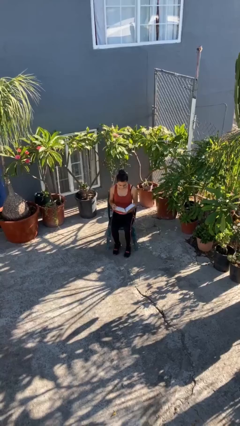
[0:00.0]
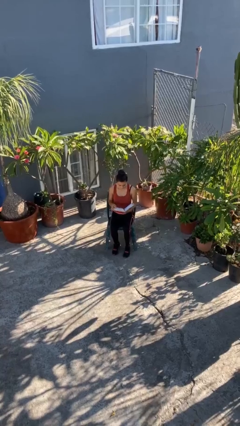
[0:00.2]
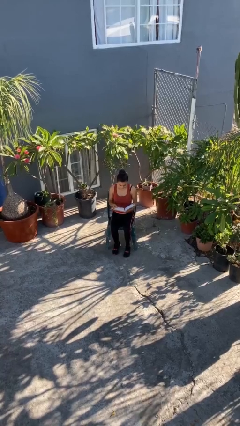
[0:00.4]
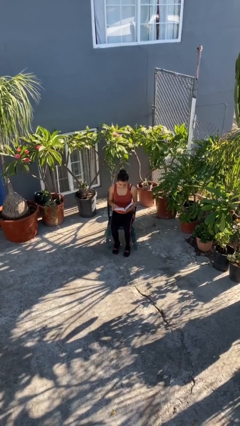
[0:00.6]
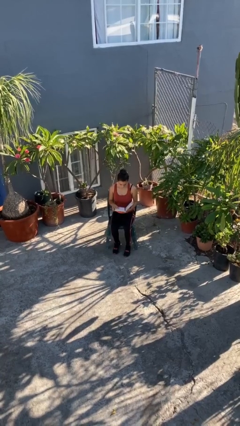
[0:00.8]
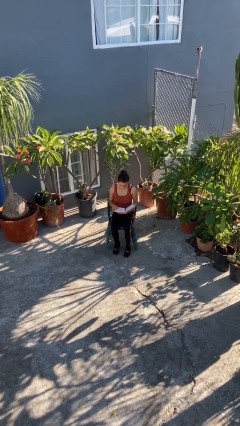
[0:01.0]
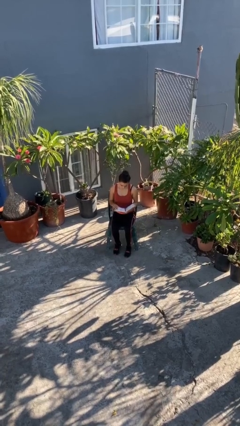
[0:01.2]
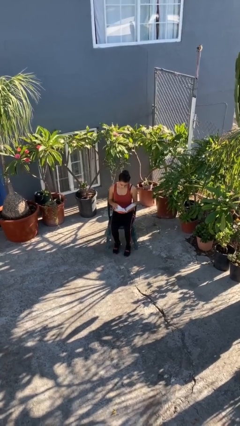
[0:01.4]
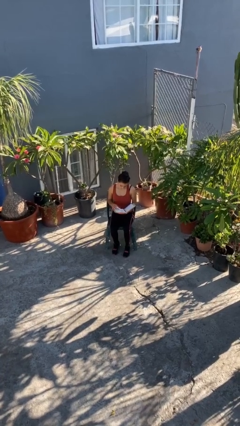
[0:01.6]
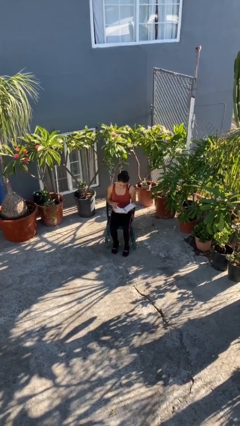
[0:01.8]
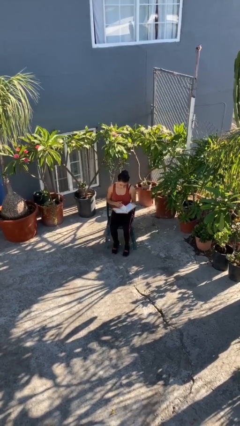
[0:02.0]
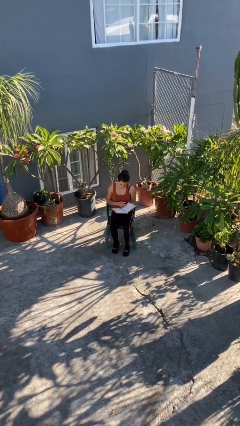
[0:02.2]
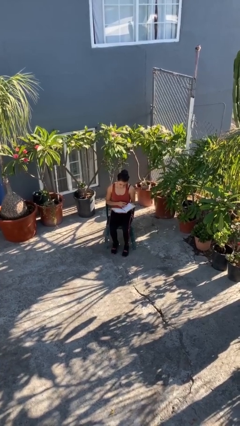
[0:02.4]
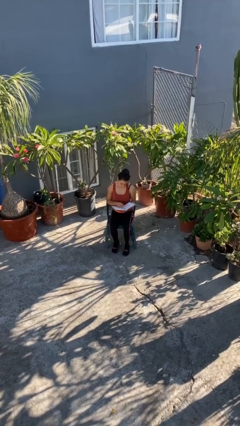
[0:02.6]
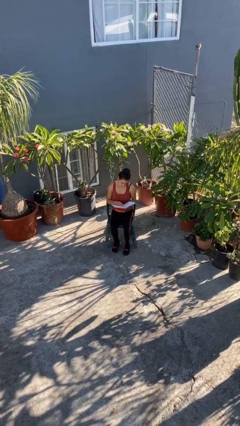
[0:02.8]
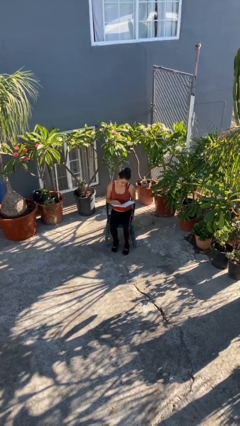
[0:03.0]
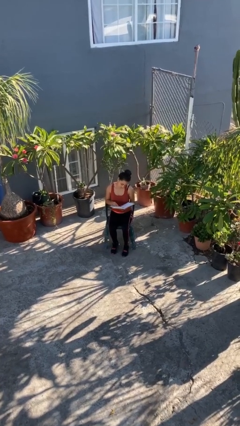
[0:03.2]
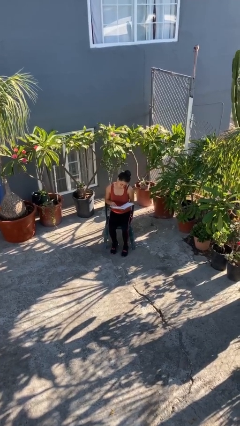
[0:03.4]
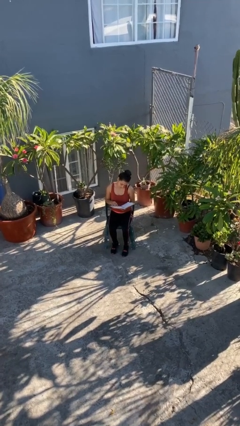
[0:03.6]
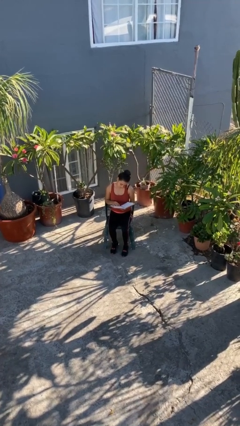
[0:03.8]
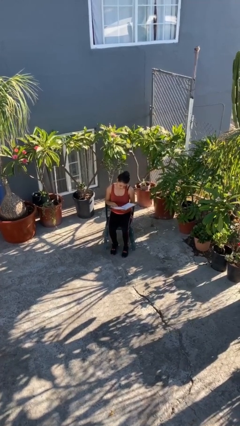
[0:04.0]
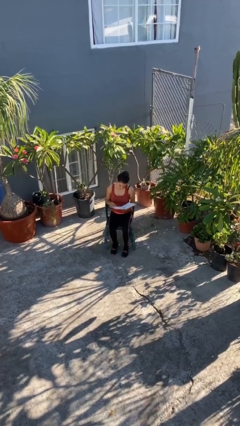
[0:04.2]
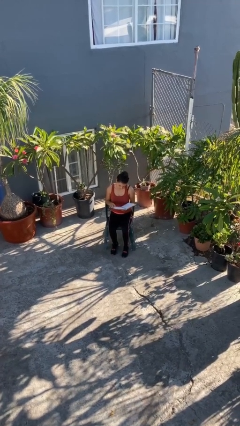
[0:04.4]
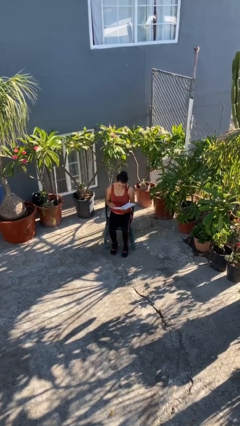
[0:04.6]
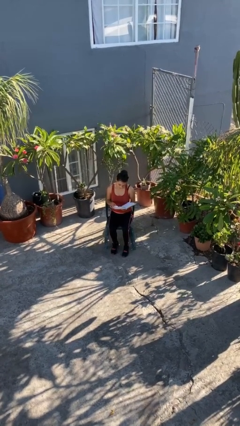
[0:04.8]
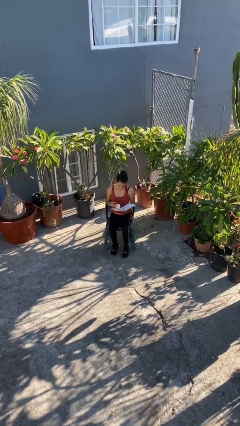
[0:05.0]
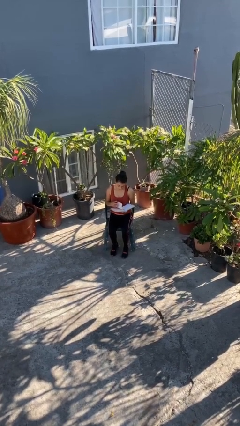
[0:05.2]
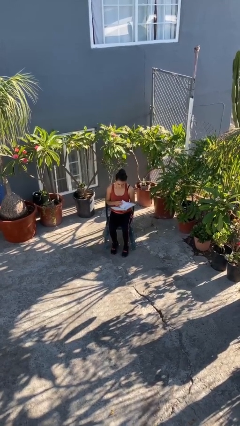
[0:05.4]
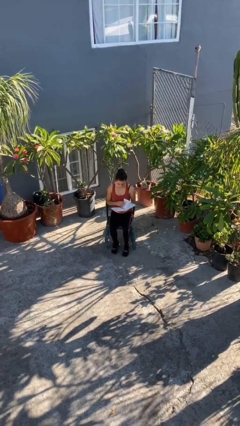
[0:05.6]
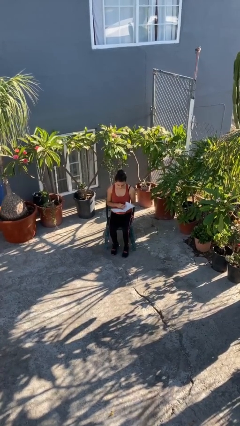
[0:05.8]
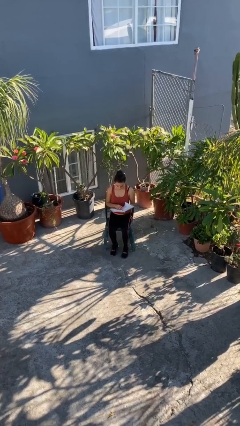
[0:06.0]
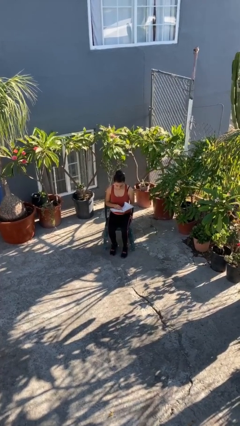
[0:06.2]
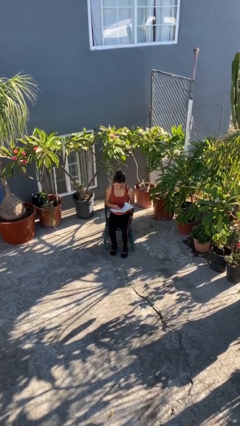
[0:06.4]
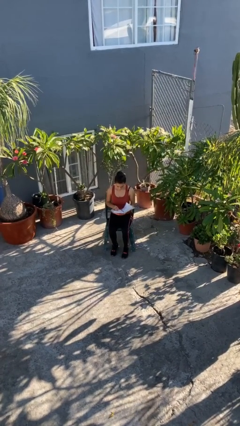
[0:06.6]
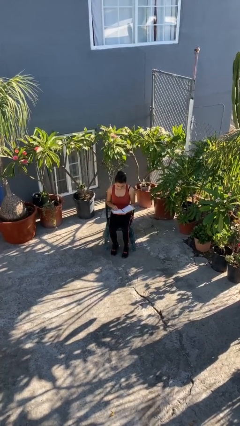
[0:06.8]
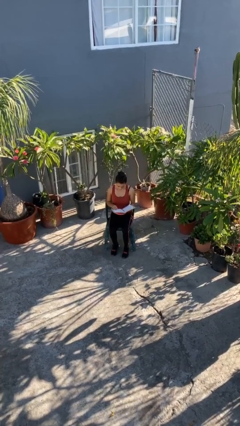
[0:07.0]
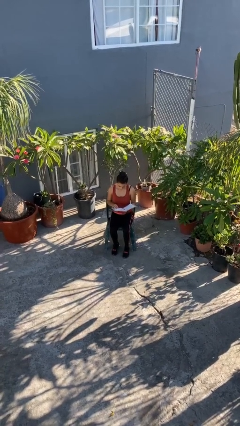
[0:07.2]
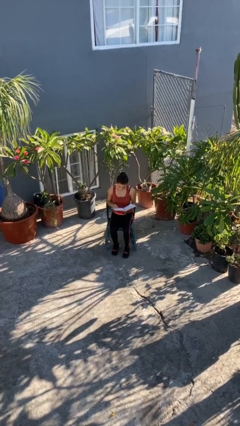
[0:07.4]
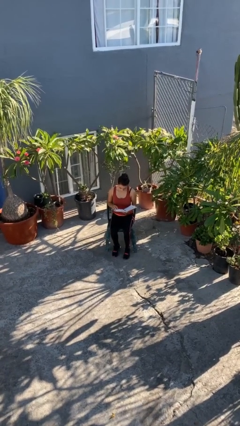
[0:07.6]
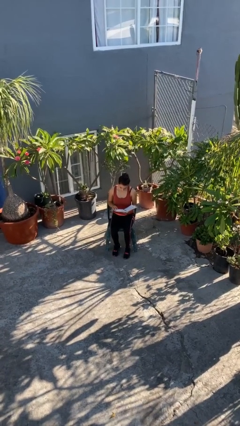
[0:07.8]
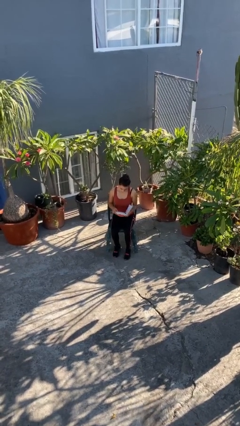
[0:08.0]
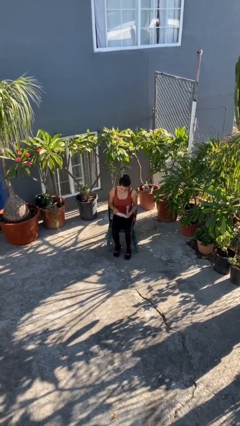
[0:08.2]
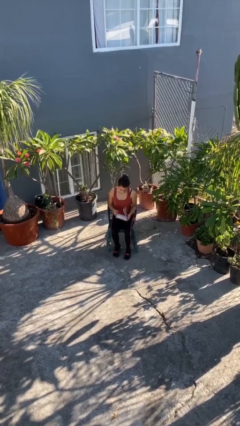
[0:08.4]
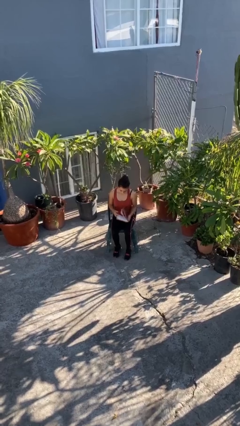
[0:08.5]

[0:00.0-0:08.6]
person reads document

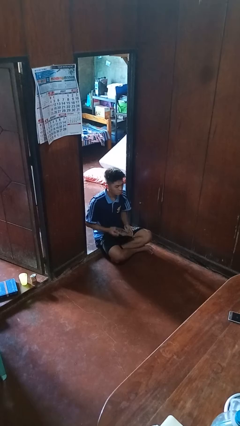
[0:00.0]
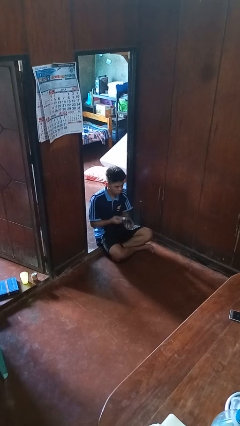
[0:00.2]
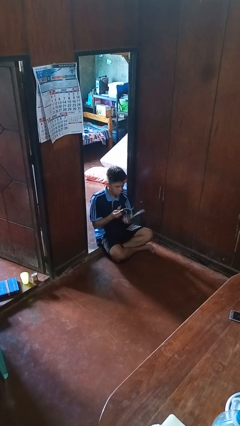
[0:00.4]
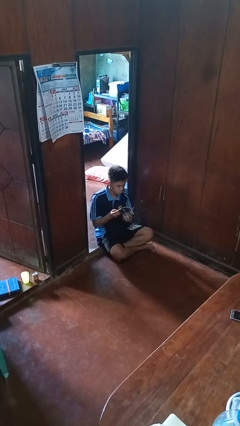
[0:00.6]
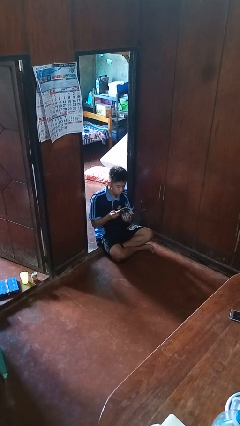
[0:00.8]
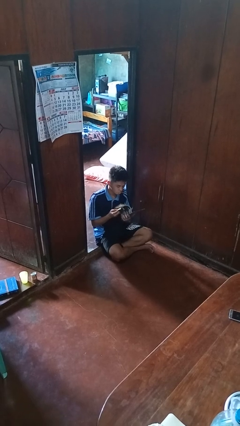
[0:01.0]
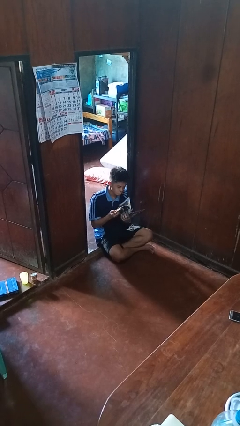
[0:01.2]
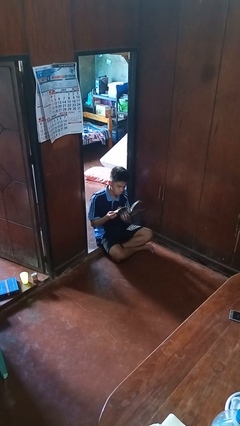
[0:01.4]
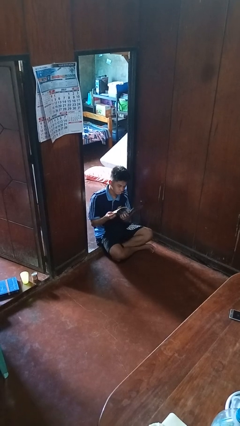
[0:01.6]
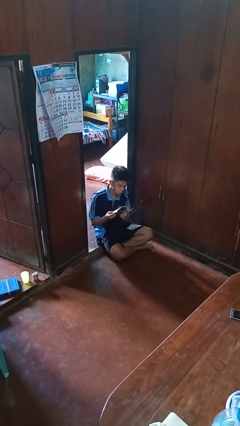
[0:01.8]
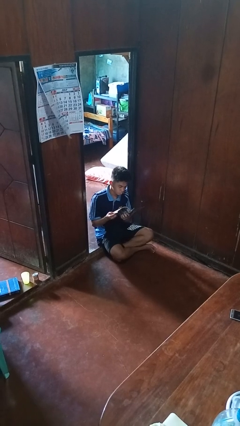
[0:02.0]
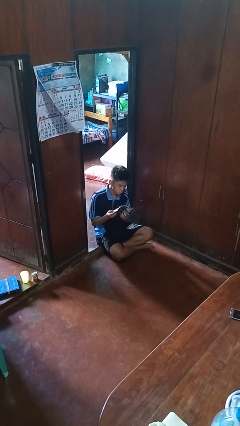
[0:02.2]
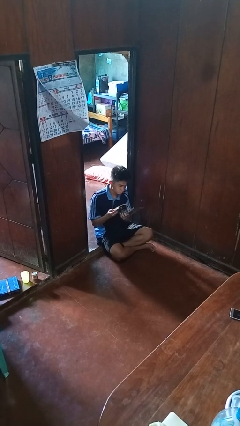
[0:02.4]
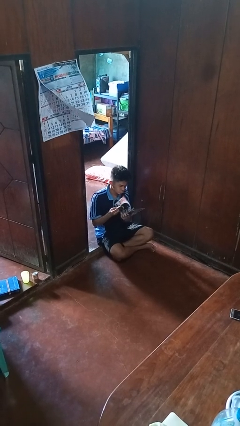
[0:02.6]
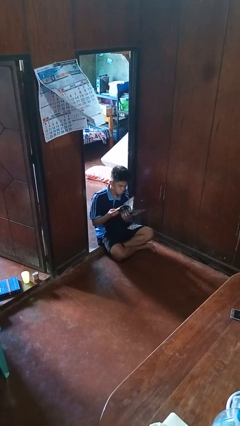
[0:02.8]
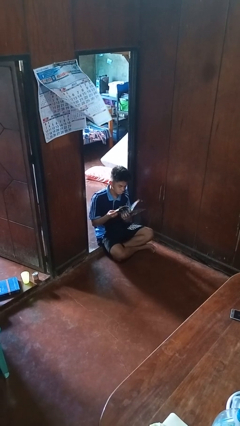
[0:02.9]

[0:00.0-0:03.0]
person reads magazine

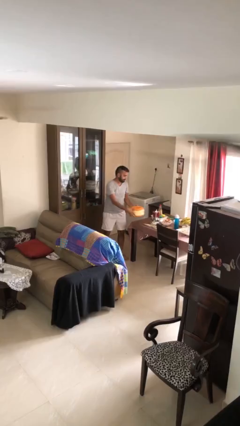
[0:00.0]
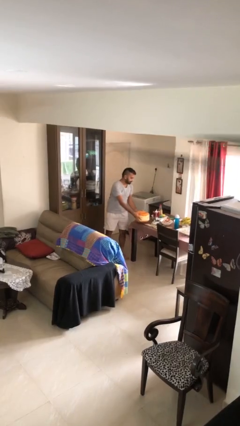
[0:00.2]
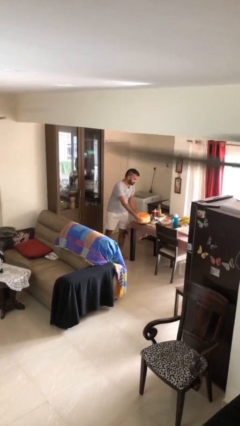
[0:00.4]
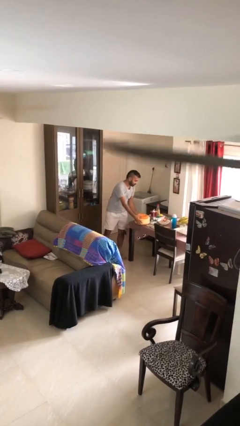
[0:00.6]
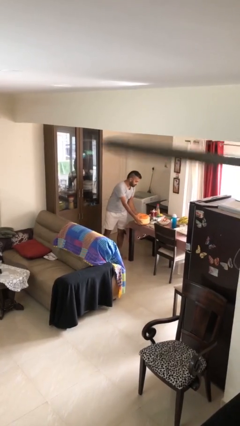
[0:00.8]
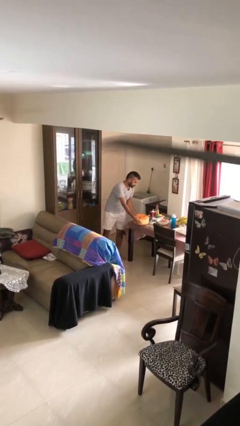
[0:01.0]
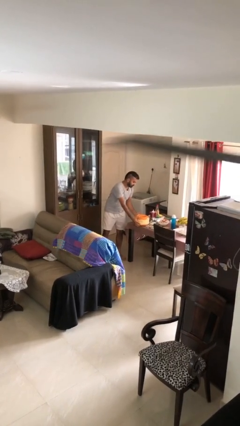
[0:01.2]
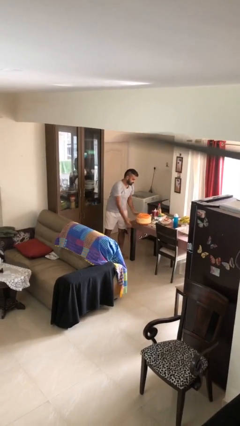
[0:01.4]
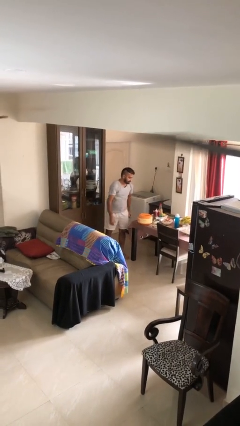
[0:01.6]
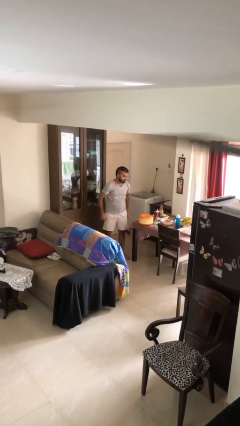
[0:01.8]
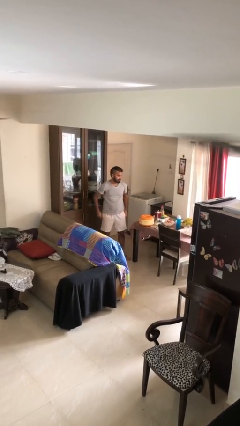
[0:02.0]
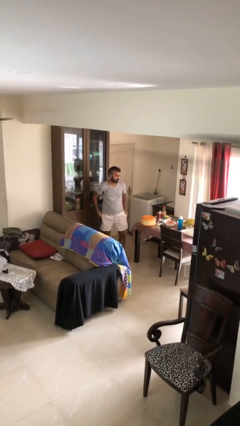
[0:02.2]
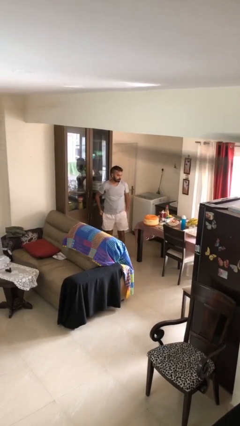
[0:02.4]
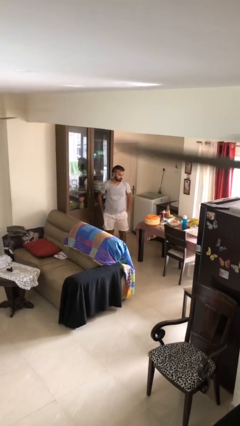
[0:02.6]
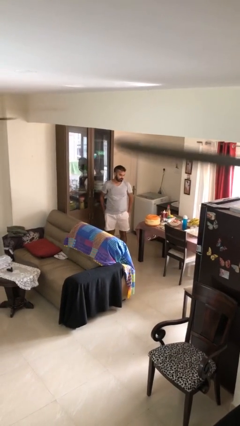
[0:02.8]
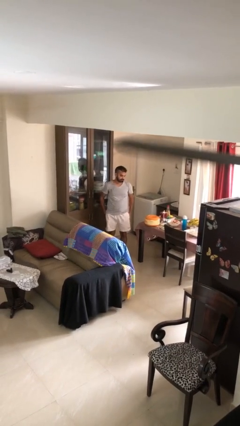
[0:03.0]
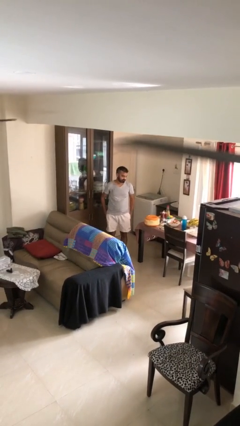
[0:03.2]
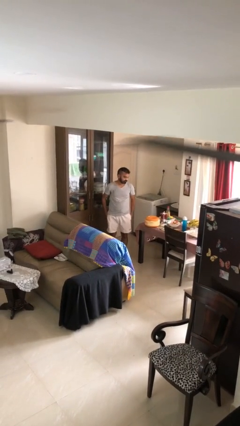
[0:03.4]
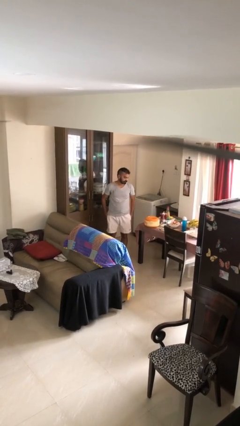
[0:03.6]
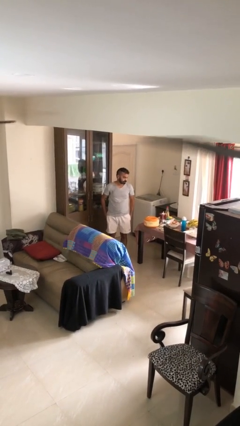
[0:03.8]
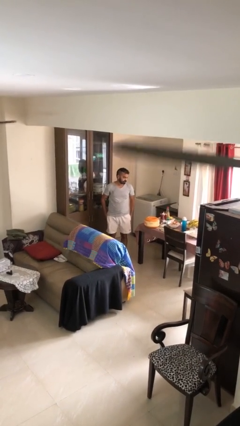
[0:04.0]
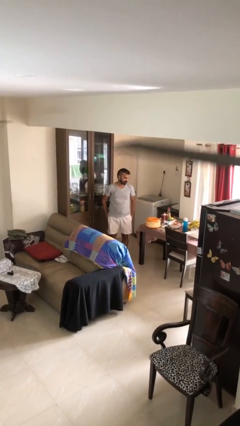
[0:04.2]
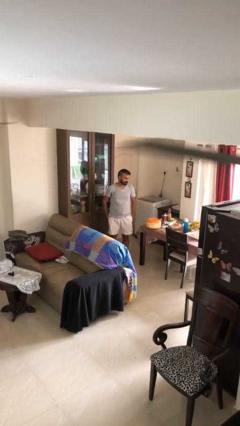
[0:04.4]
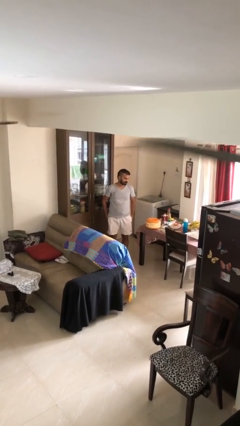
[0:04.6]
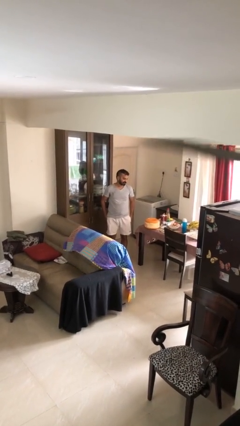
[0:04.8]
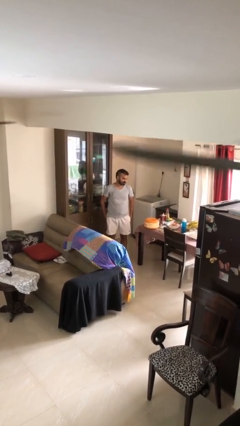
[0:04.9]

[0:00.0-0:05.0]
person puts down object on table

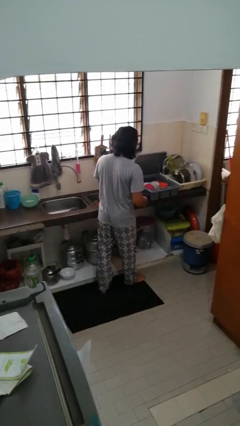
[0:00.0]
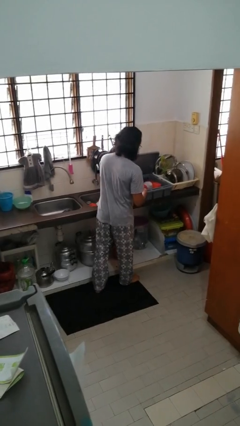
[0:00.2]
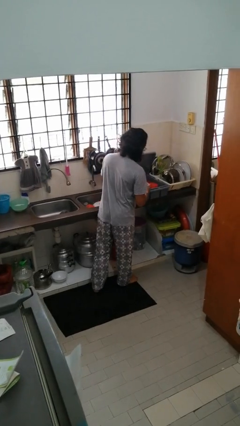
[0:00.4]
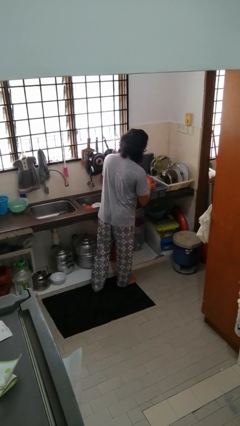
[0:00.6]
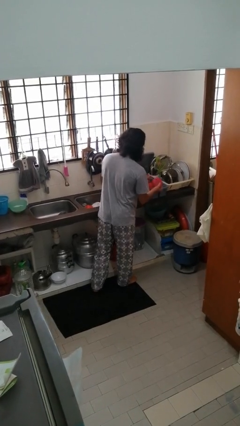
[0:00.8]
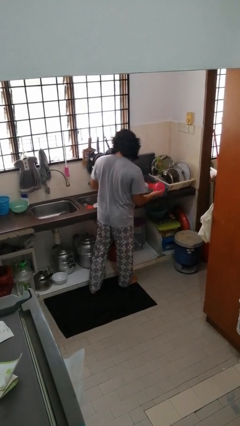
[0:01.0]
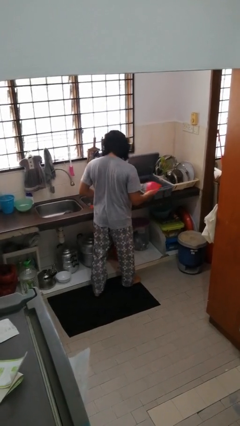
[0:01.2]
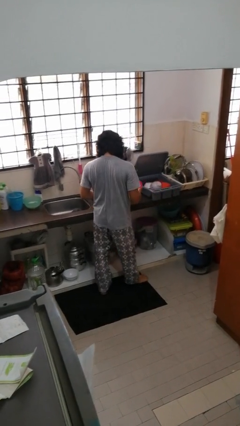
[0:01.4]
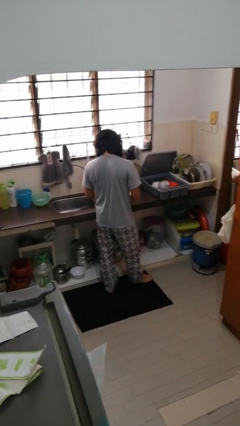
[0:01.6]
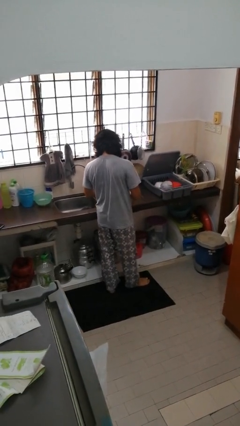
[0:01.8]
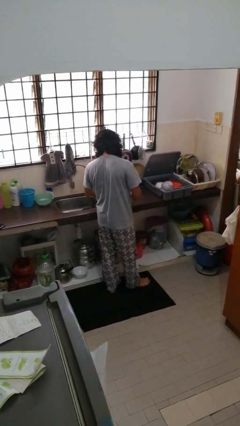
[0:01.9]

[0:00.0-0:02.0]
person unloads dishwasher
